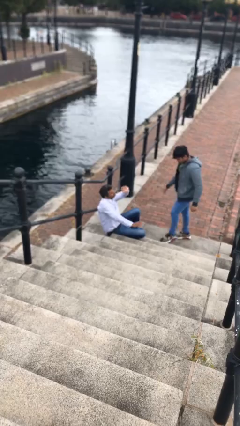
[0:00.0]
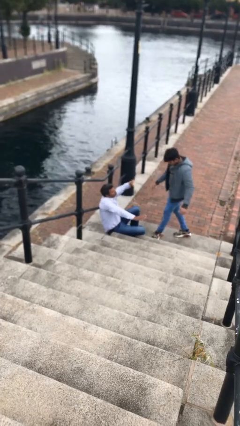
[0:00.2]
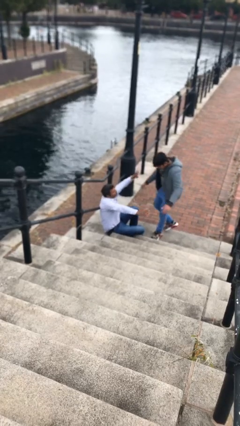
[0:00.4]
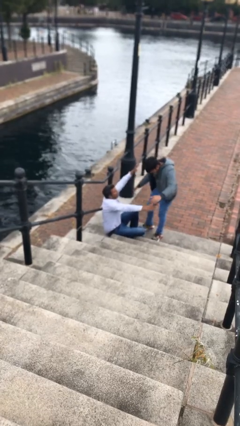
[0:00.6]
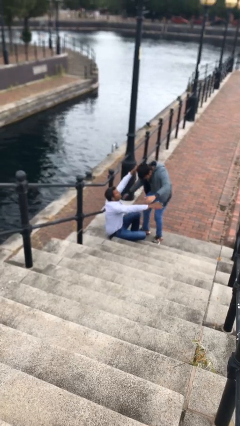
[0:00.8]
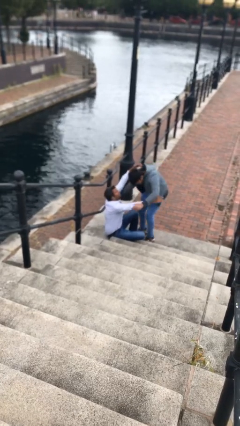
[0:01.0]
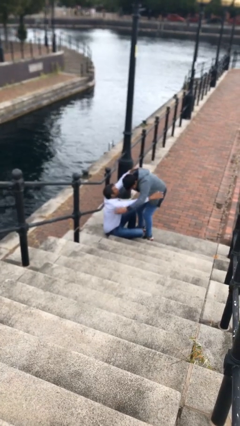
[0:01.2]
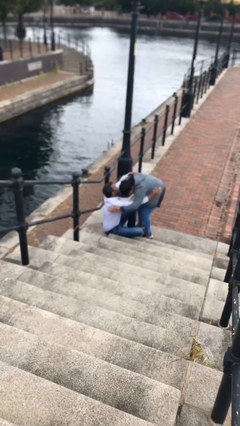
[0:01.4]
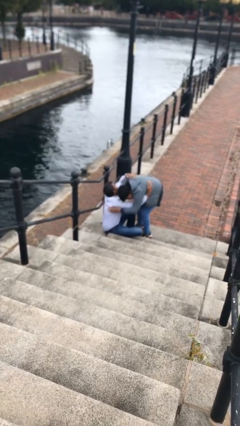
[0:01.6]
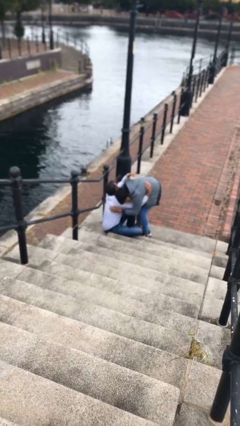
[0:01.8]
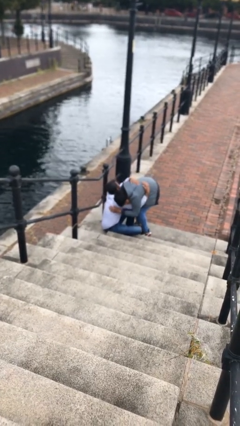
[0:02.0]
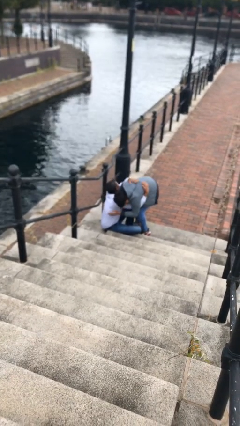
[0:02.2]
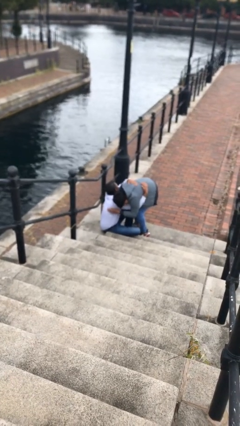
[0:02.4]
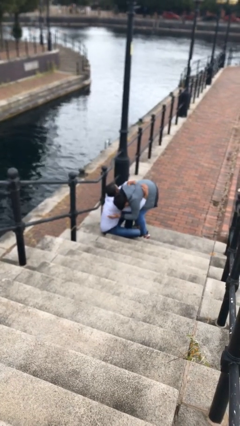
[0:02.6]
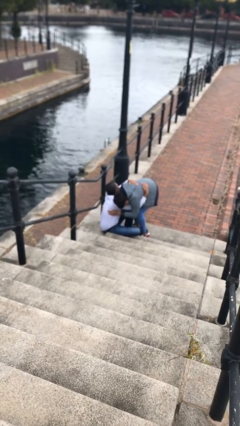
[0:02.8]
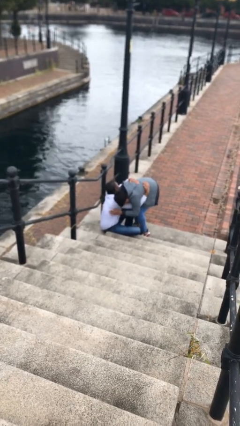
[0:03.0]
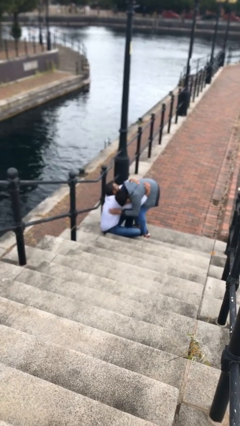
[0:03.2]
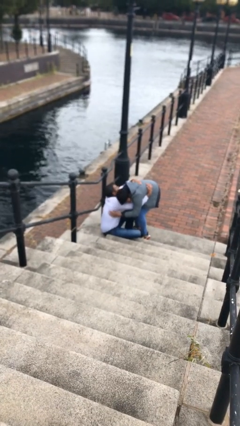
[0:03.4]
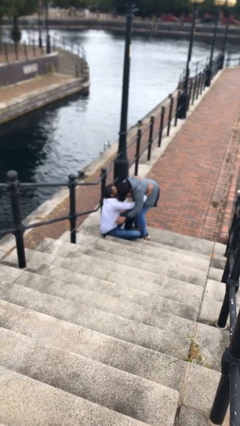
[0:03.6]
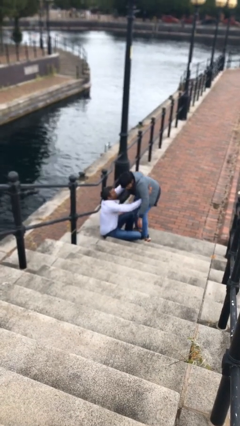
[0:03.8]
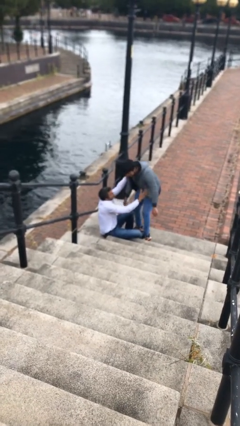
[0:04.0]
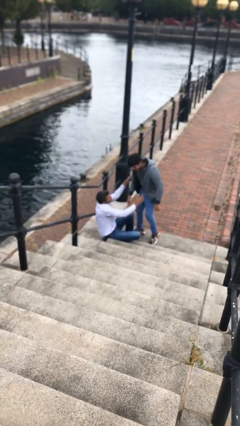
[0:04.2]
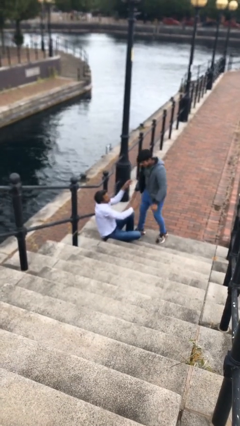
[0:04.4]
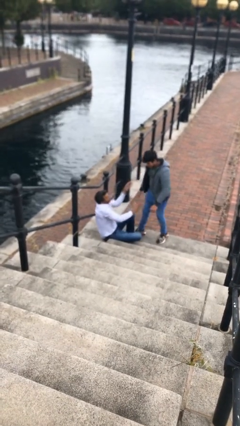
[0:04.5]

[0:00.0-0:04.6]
person embraces person

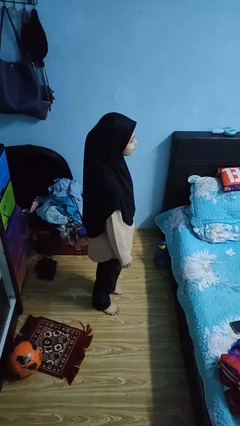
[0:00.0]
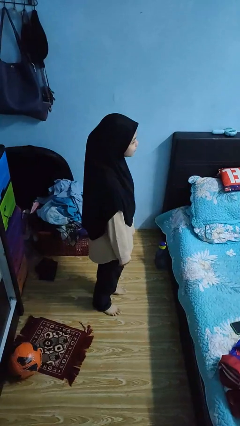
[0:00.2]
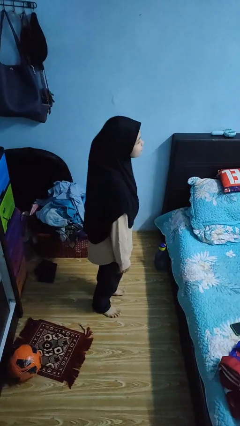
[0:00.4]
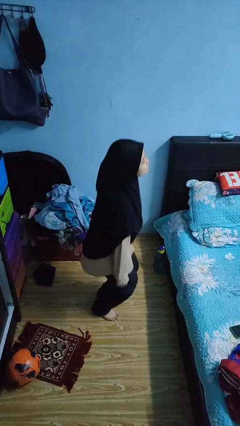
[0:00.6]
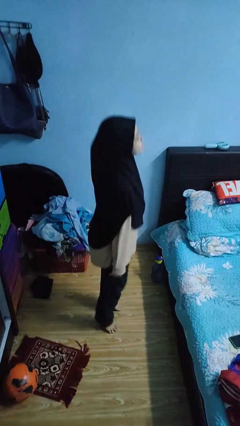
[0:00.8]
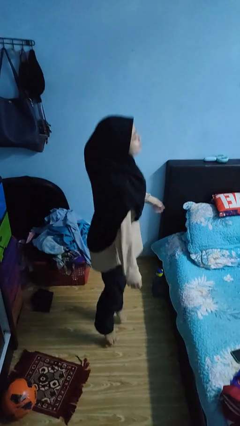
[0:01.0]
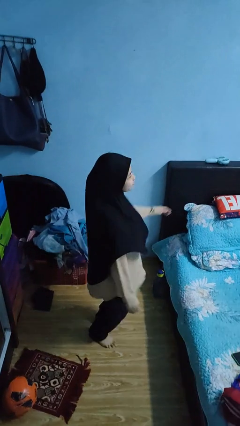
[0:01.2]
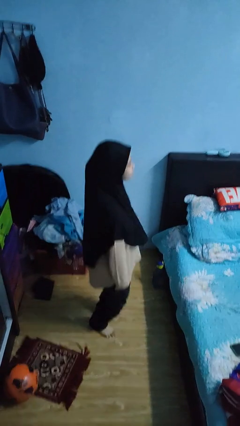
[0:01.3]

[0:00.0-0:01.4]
person jumps

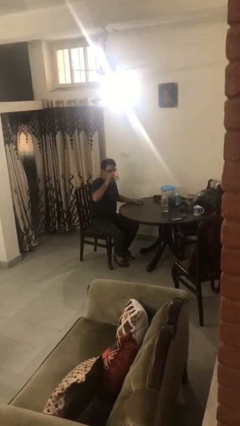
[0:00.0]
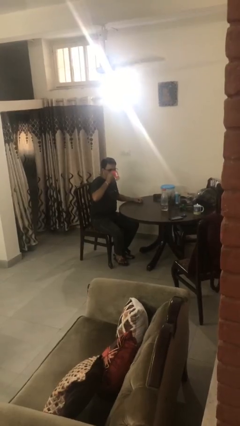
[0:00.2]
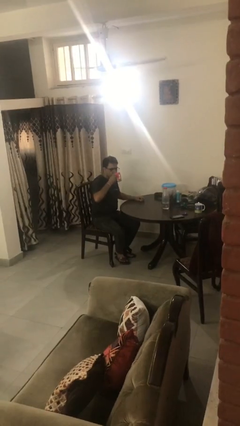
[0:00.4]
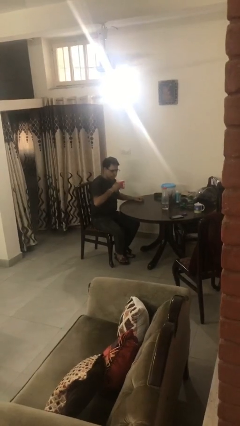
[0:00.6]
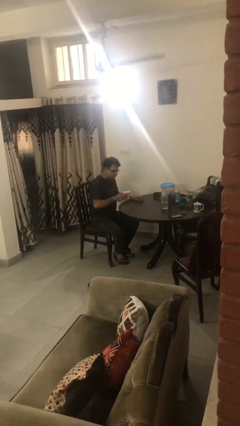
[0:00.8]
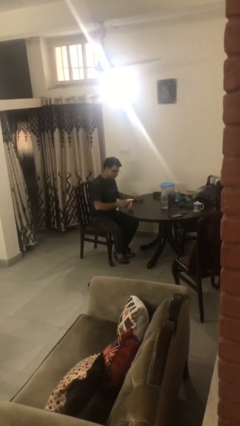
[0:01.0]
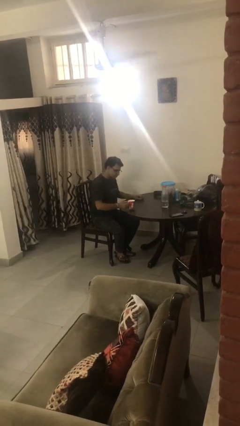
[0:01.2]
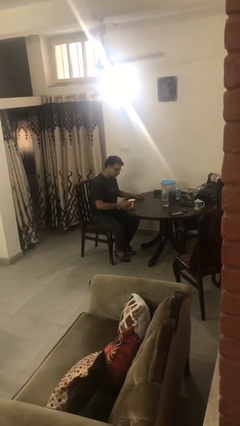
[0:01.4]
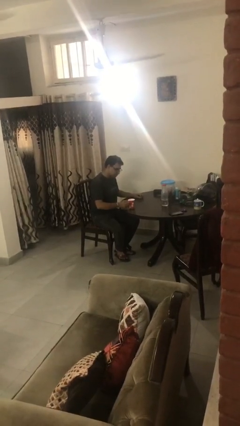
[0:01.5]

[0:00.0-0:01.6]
person puts down object on table

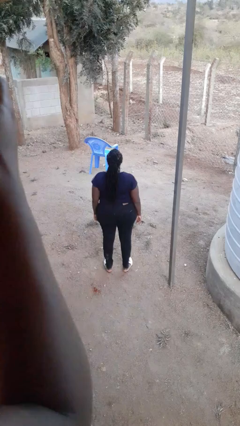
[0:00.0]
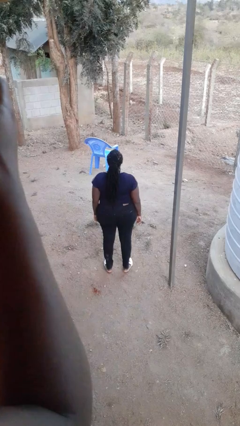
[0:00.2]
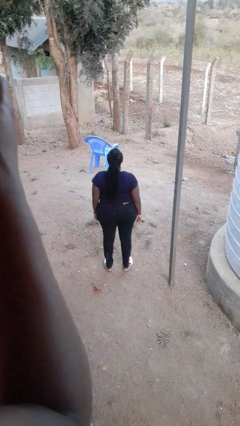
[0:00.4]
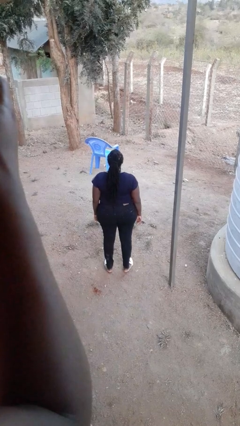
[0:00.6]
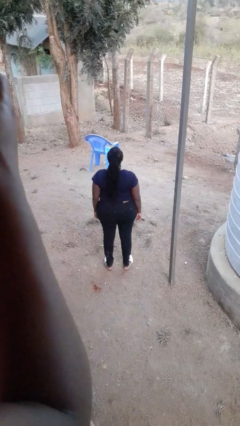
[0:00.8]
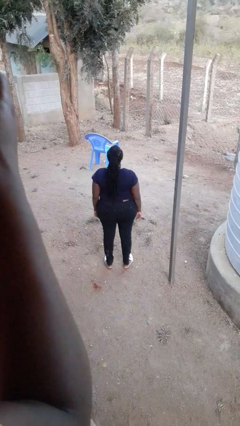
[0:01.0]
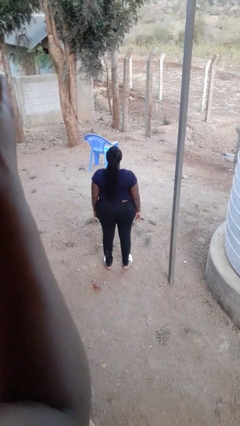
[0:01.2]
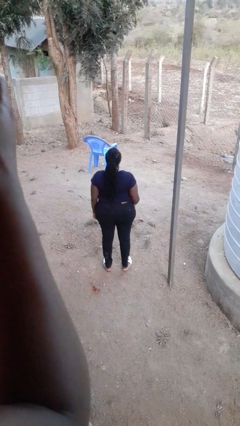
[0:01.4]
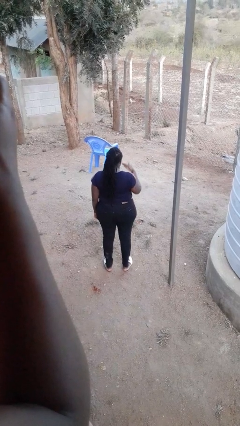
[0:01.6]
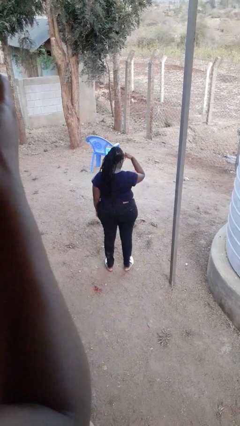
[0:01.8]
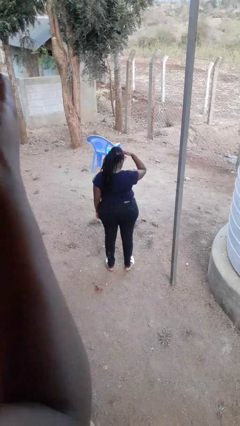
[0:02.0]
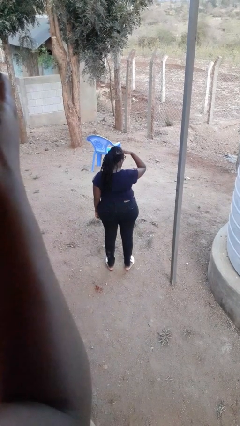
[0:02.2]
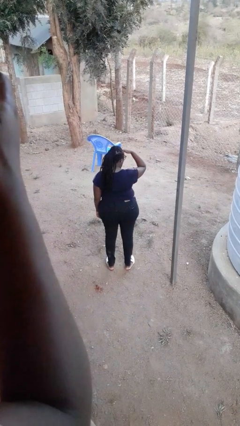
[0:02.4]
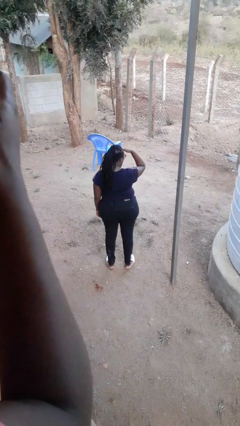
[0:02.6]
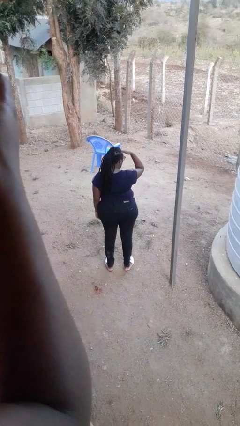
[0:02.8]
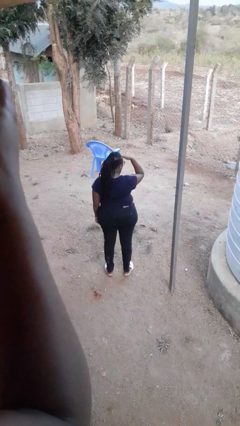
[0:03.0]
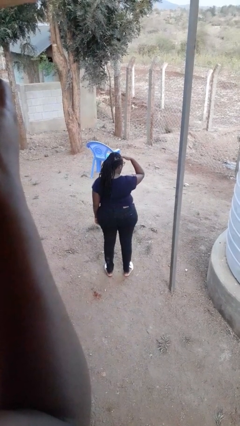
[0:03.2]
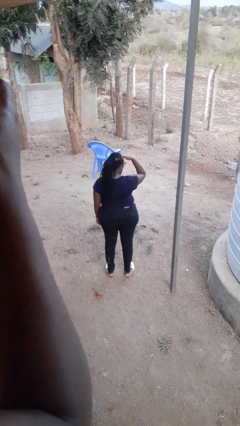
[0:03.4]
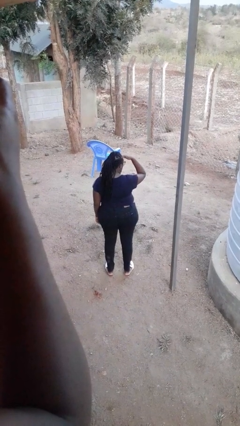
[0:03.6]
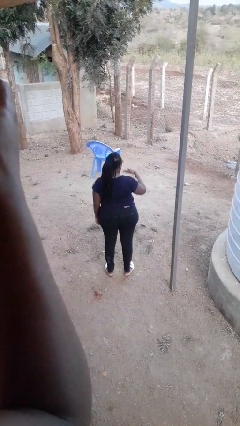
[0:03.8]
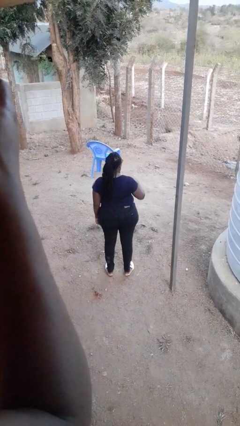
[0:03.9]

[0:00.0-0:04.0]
person shades eyes

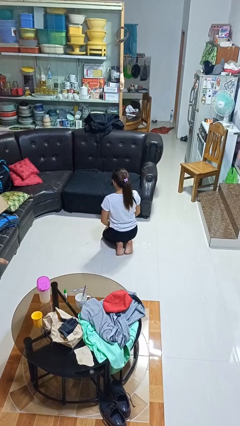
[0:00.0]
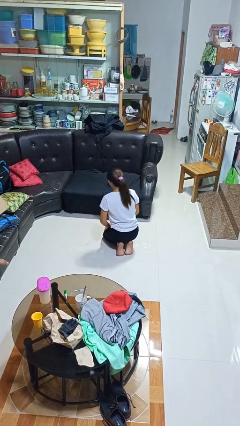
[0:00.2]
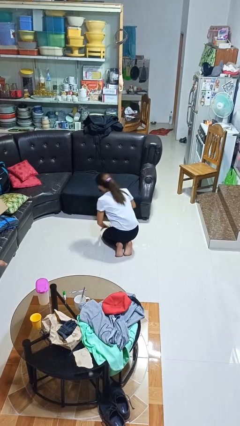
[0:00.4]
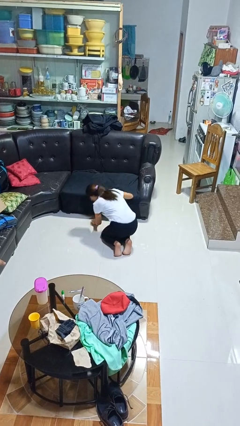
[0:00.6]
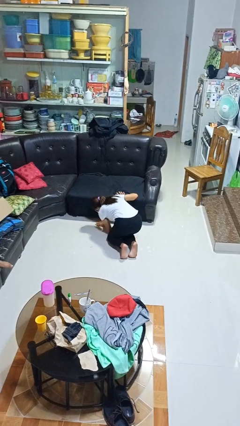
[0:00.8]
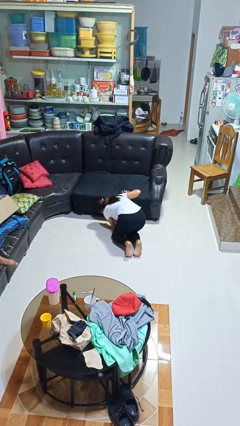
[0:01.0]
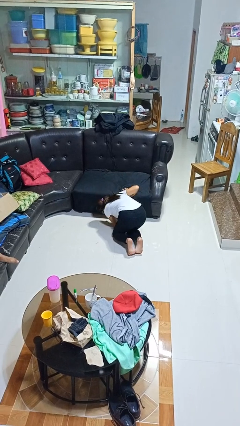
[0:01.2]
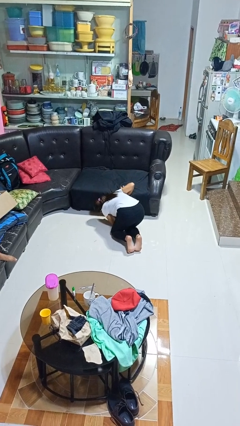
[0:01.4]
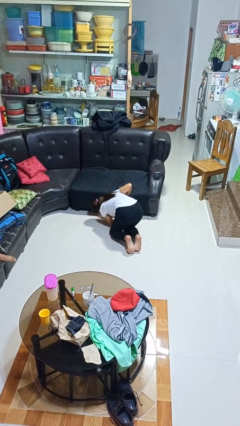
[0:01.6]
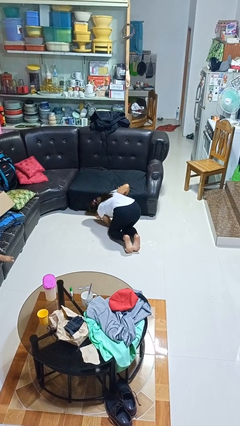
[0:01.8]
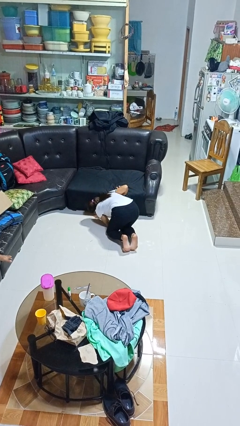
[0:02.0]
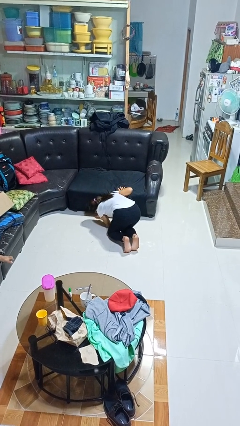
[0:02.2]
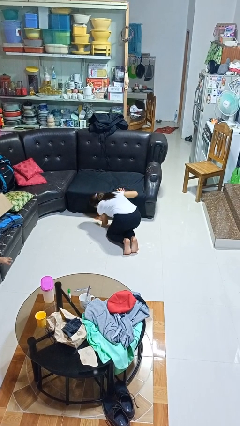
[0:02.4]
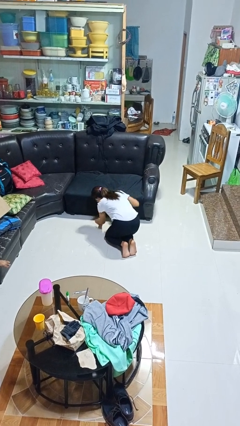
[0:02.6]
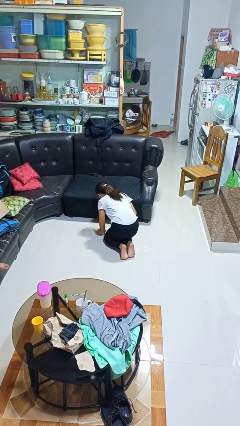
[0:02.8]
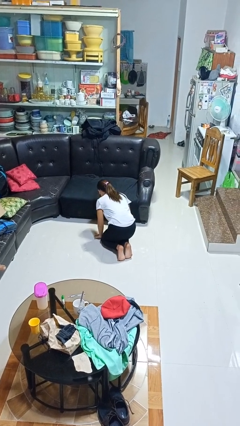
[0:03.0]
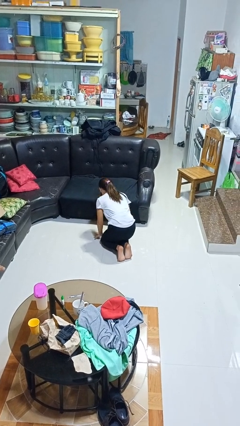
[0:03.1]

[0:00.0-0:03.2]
person searches under couch

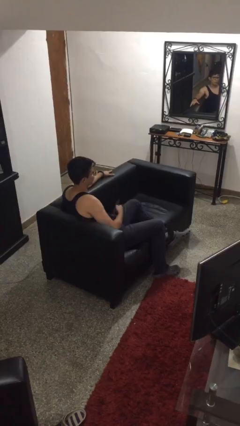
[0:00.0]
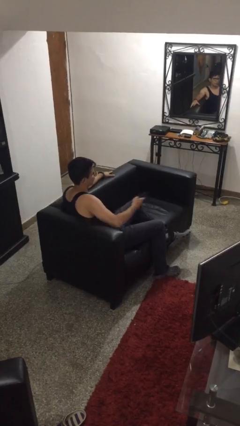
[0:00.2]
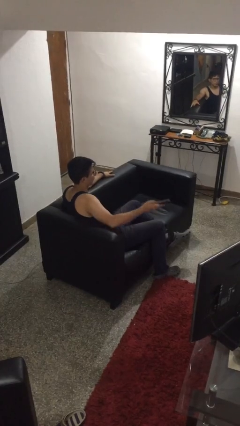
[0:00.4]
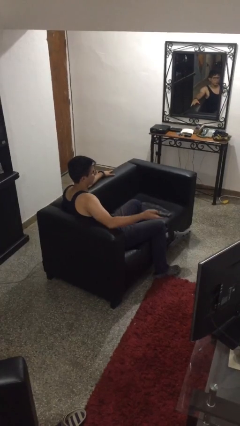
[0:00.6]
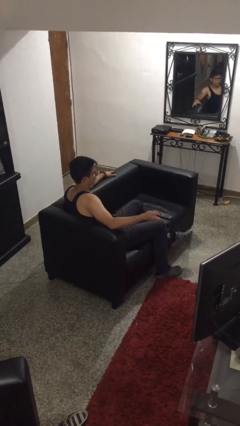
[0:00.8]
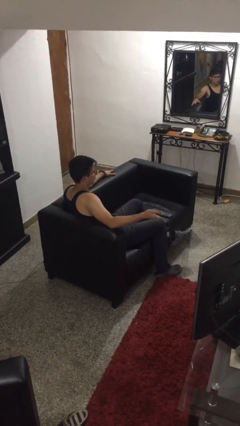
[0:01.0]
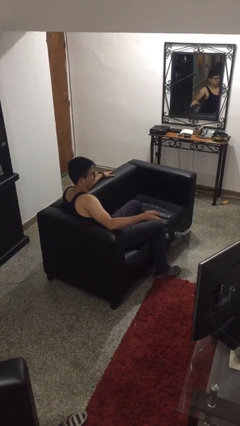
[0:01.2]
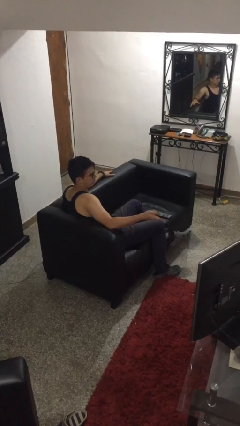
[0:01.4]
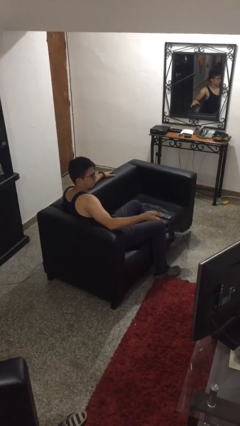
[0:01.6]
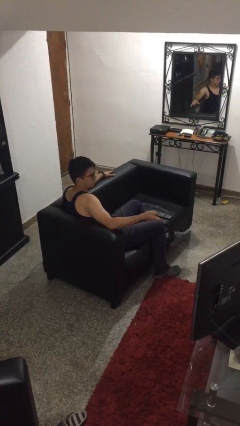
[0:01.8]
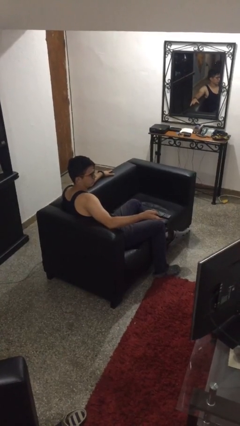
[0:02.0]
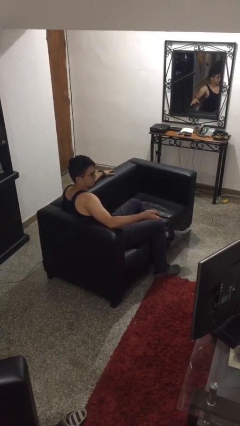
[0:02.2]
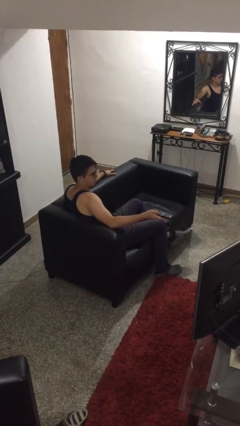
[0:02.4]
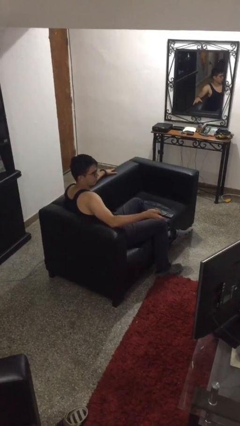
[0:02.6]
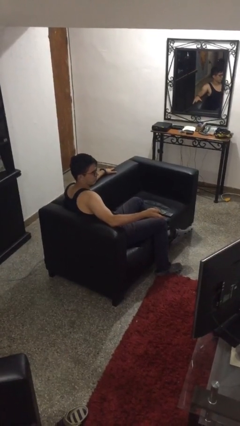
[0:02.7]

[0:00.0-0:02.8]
person uses television remote
